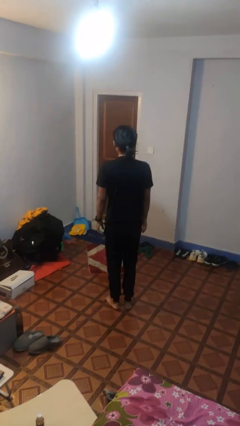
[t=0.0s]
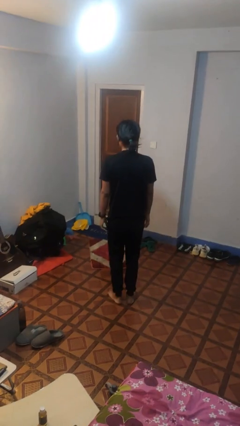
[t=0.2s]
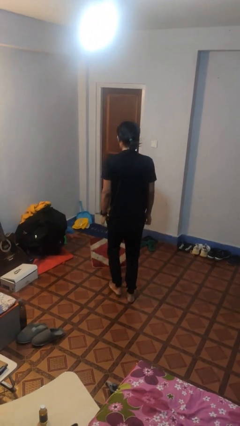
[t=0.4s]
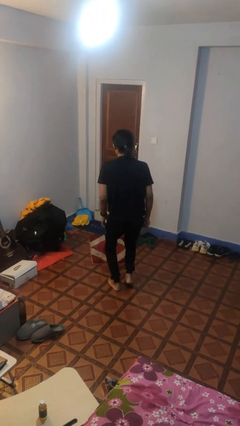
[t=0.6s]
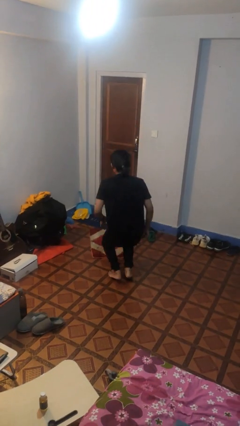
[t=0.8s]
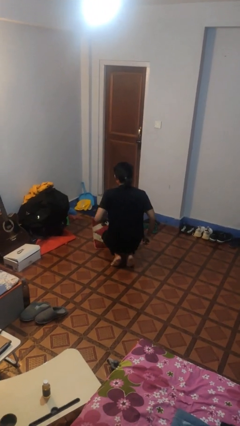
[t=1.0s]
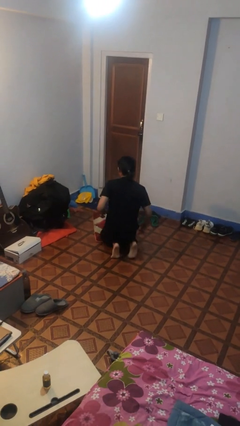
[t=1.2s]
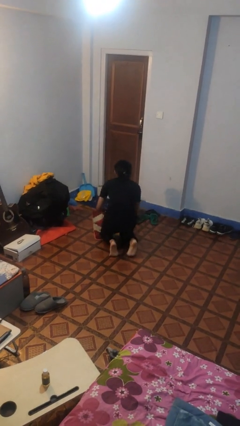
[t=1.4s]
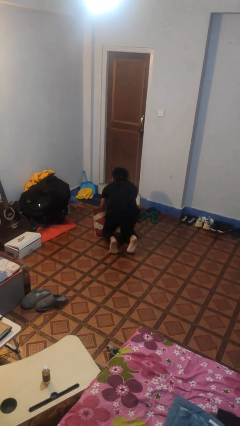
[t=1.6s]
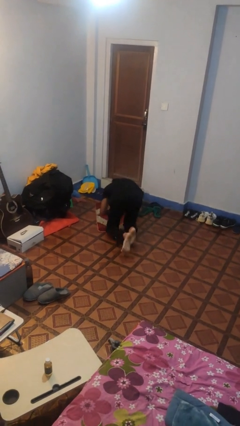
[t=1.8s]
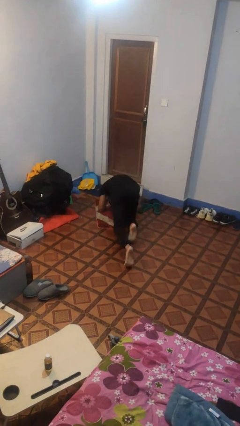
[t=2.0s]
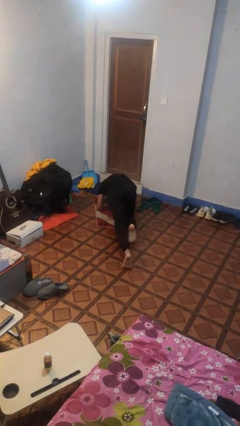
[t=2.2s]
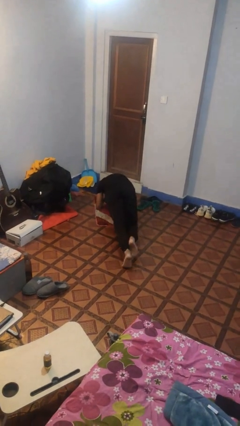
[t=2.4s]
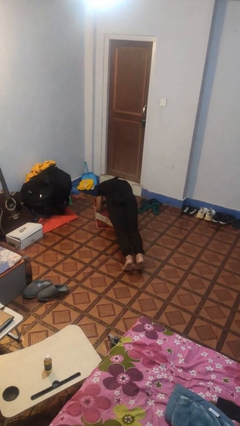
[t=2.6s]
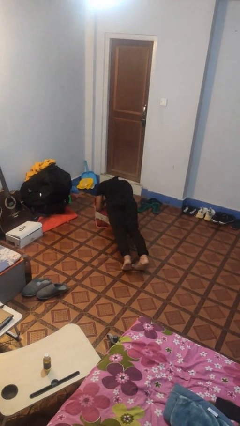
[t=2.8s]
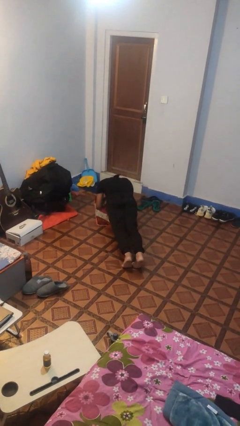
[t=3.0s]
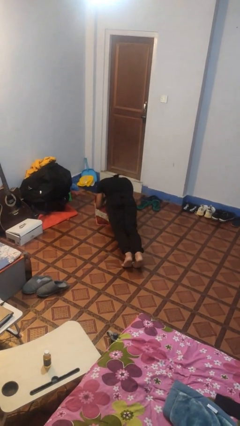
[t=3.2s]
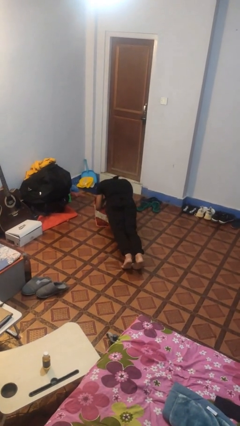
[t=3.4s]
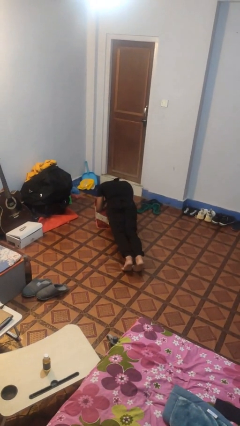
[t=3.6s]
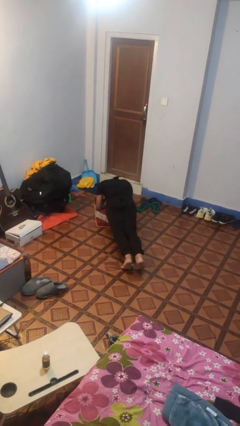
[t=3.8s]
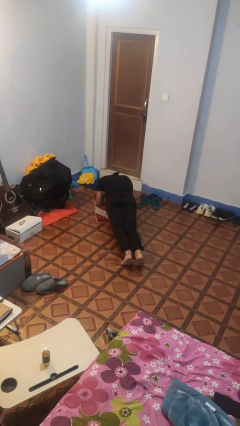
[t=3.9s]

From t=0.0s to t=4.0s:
person exercises with plank

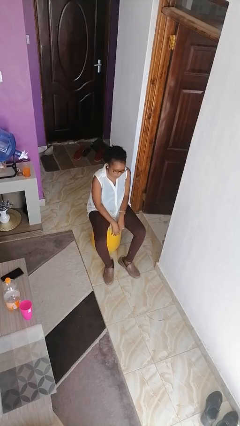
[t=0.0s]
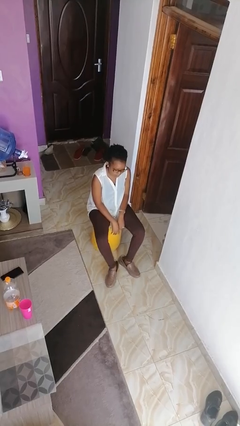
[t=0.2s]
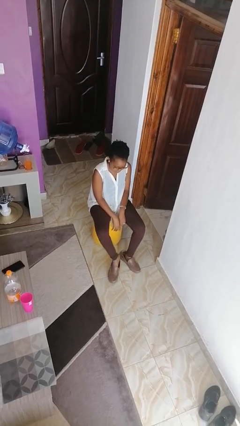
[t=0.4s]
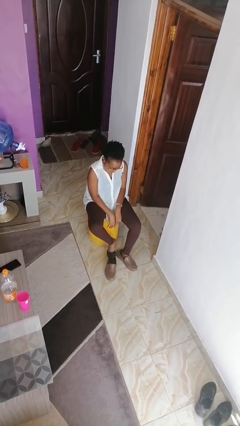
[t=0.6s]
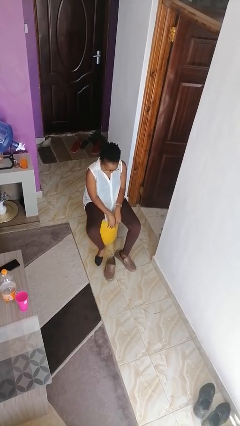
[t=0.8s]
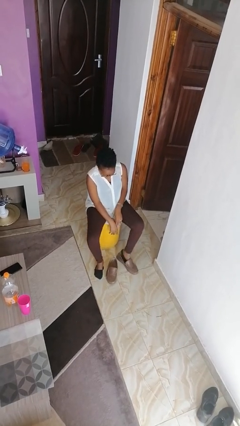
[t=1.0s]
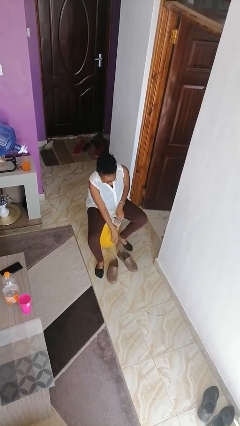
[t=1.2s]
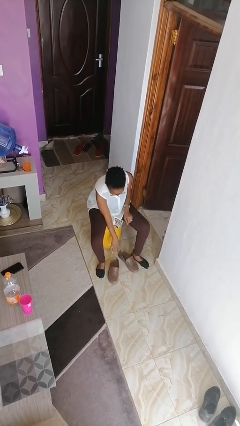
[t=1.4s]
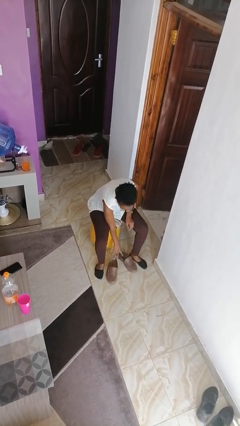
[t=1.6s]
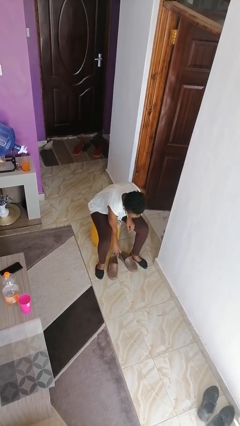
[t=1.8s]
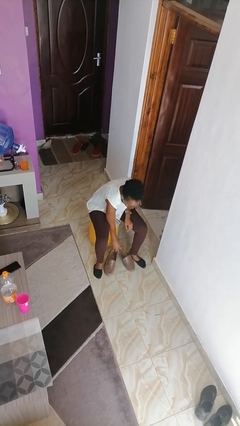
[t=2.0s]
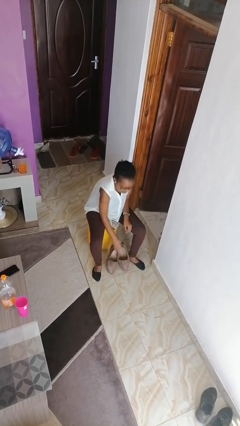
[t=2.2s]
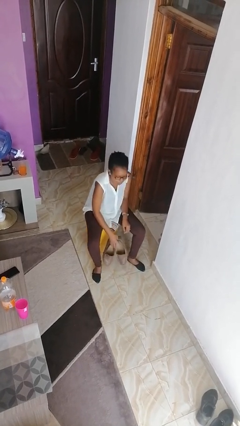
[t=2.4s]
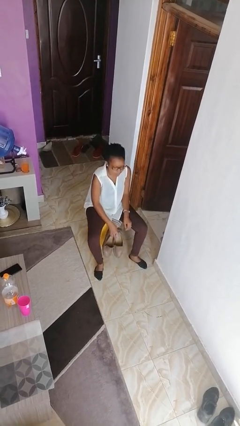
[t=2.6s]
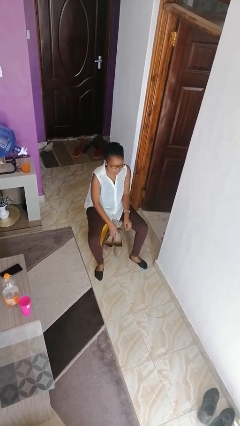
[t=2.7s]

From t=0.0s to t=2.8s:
person takes off shoes

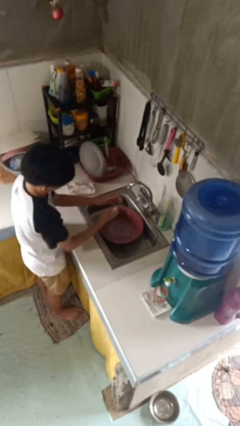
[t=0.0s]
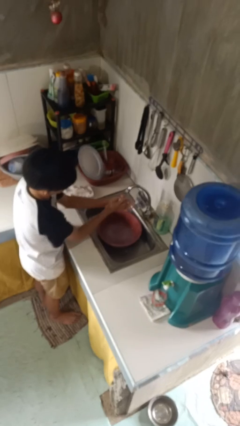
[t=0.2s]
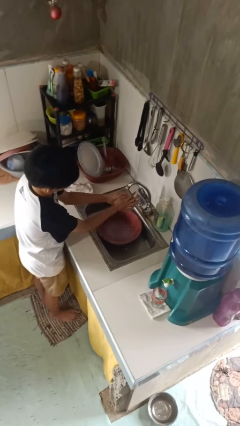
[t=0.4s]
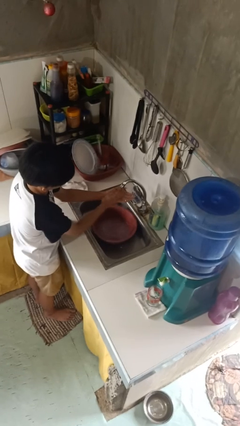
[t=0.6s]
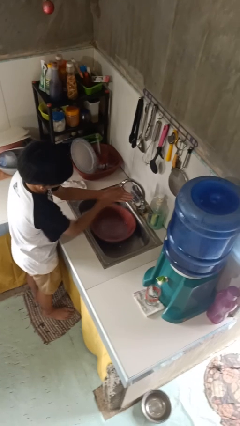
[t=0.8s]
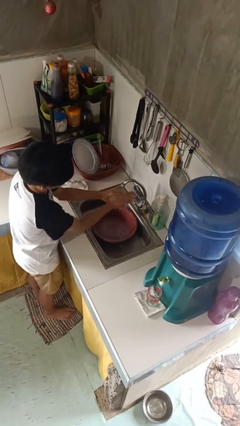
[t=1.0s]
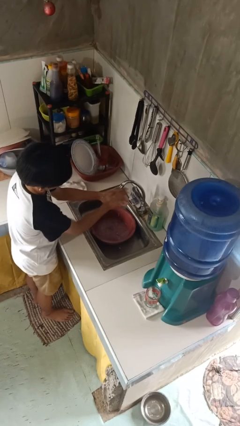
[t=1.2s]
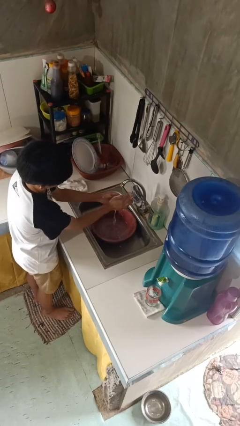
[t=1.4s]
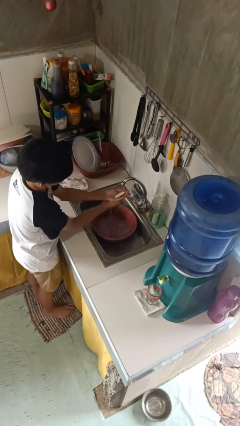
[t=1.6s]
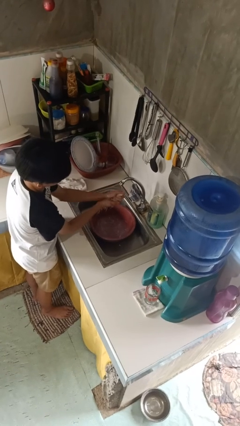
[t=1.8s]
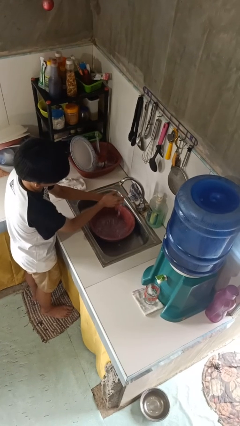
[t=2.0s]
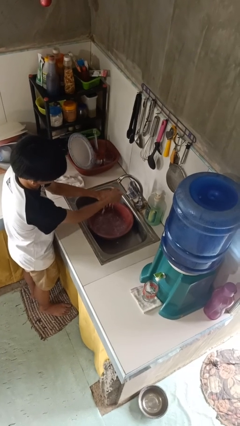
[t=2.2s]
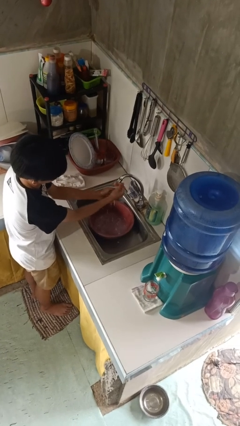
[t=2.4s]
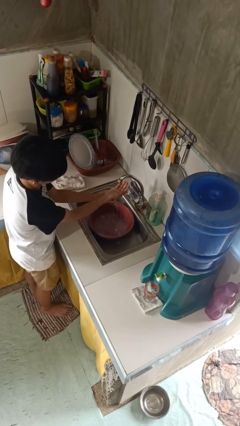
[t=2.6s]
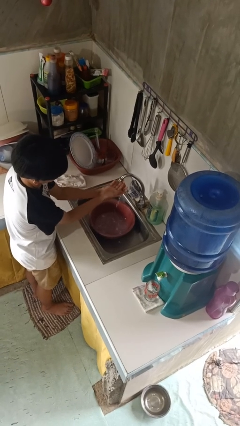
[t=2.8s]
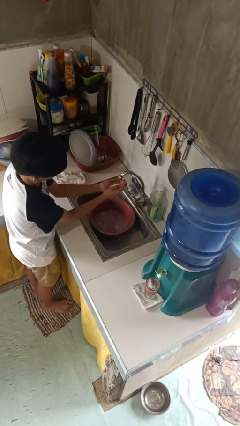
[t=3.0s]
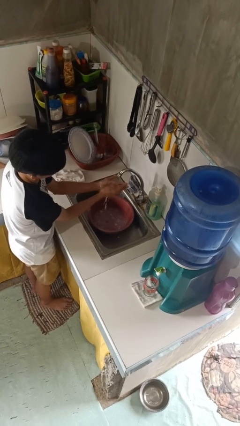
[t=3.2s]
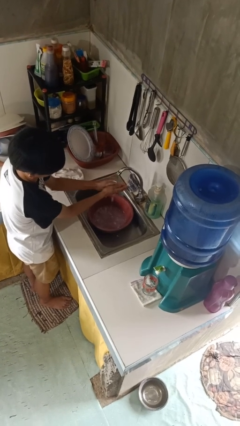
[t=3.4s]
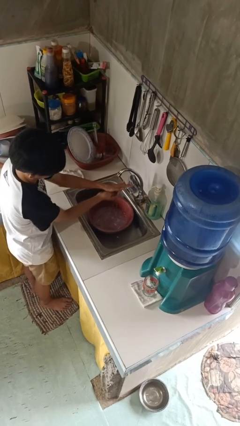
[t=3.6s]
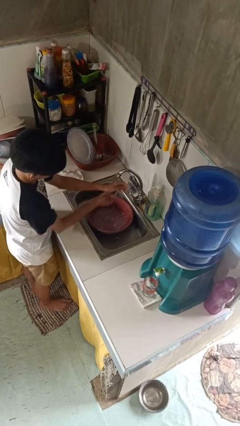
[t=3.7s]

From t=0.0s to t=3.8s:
person washes hands

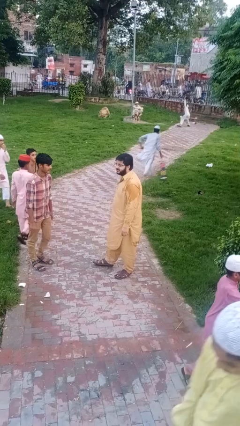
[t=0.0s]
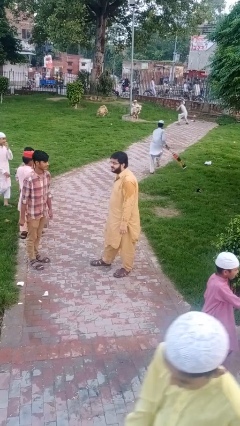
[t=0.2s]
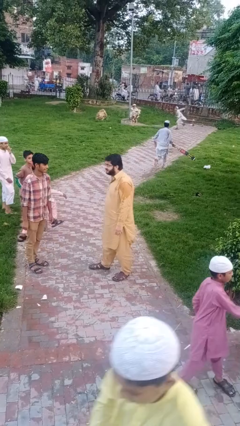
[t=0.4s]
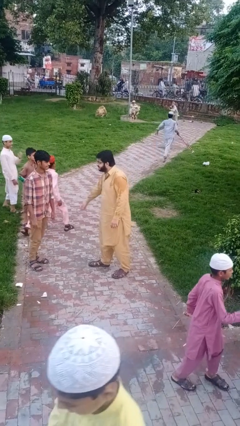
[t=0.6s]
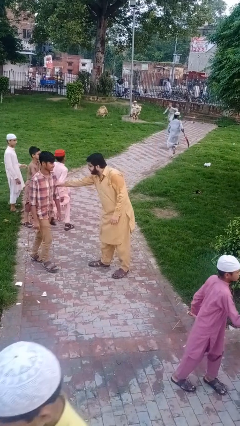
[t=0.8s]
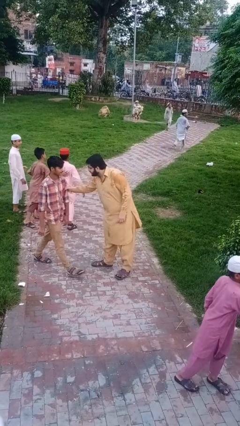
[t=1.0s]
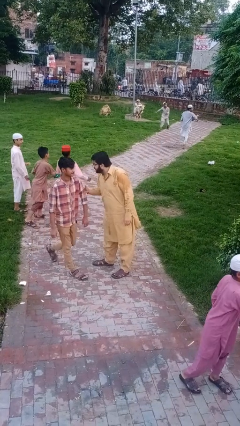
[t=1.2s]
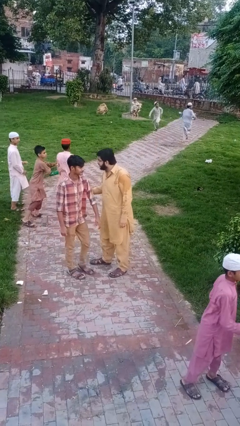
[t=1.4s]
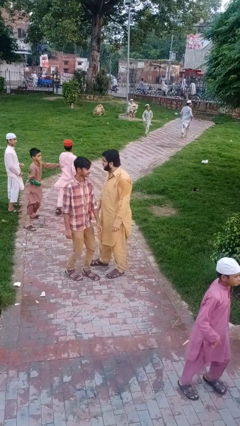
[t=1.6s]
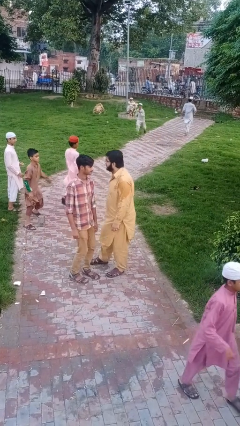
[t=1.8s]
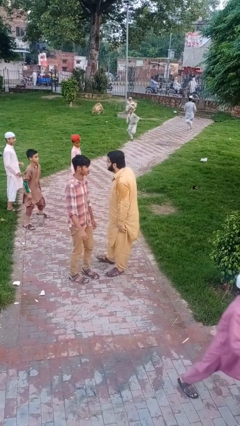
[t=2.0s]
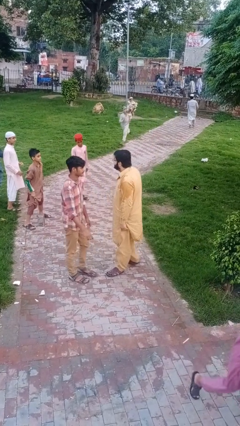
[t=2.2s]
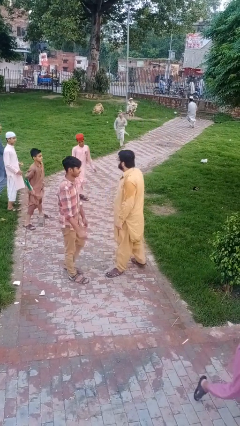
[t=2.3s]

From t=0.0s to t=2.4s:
person grabs person by bicep

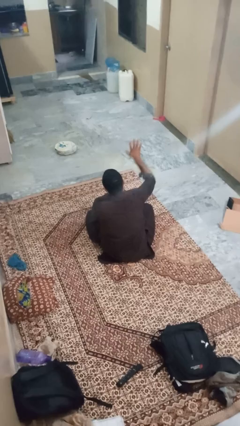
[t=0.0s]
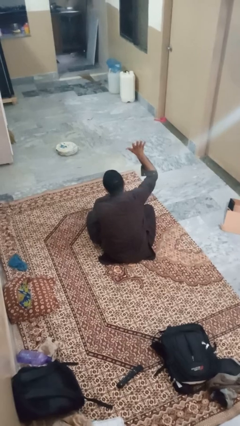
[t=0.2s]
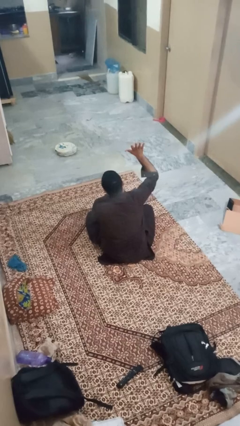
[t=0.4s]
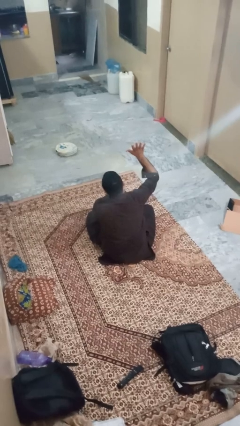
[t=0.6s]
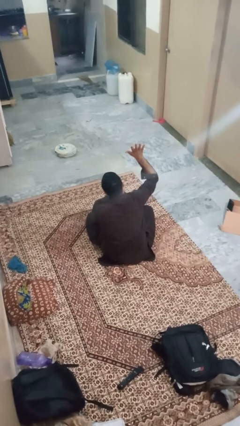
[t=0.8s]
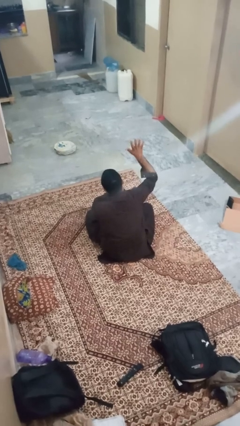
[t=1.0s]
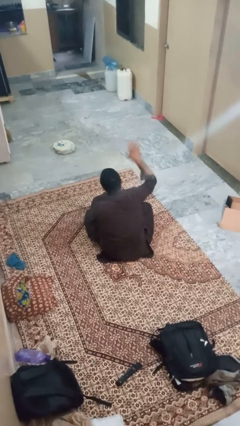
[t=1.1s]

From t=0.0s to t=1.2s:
person gestures number five

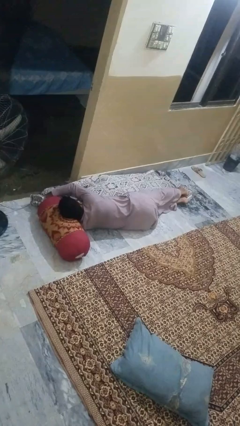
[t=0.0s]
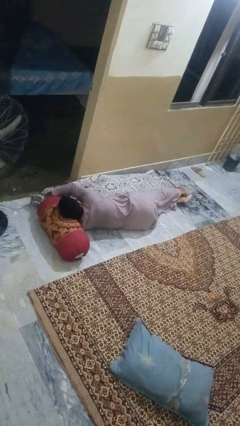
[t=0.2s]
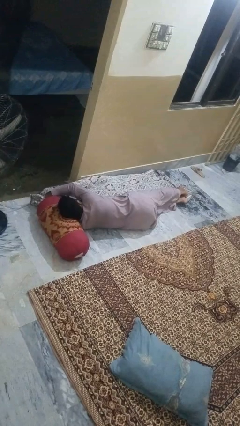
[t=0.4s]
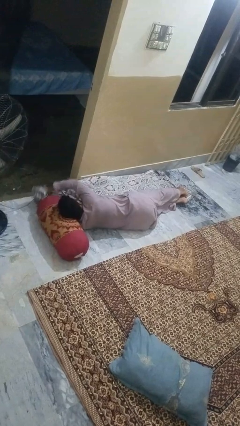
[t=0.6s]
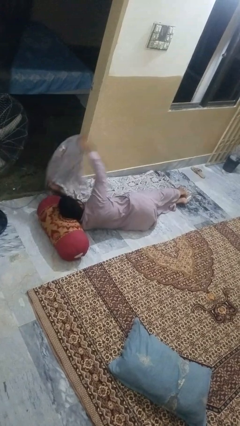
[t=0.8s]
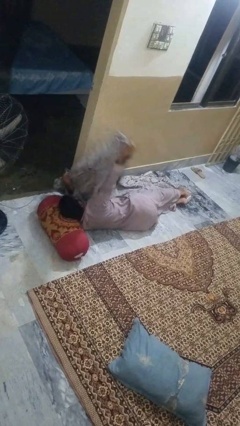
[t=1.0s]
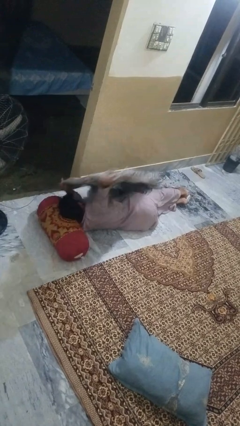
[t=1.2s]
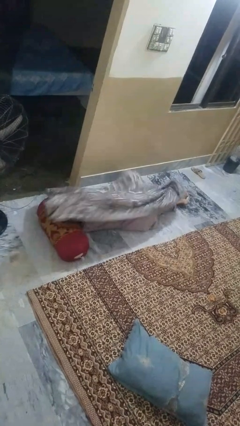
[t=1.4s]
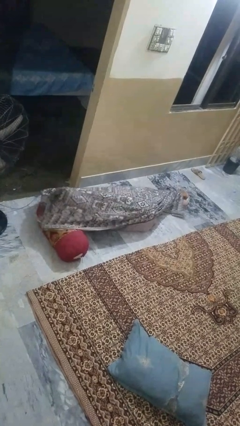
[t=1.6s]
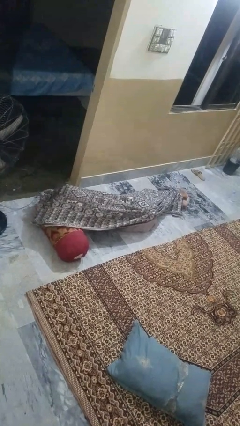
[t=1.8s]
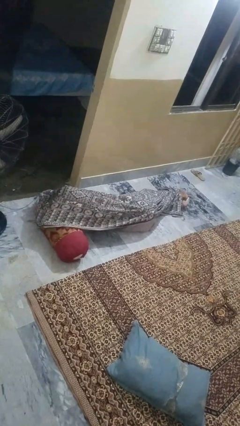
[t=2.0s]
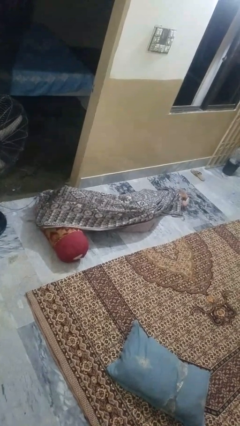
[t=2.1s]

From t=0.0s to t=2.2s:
person covers with blanket

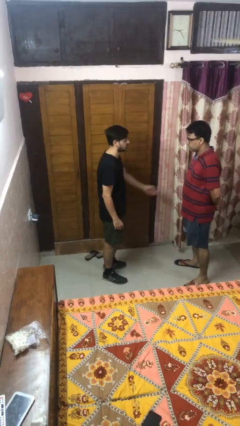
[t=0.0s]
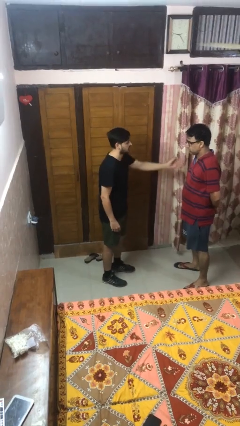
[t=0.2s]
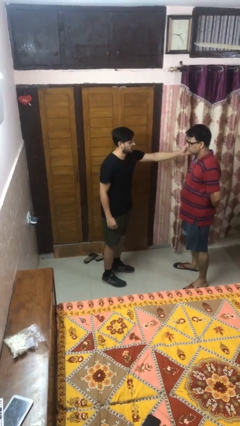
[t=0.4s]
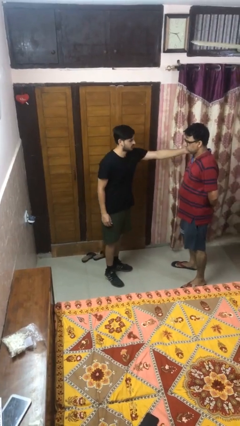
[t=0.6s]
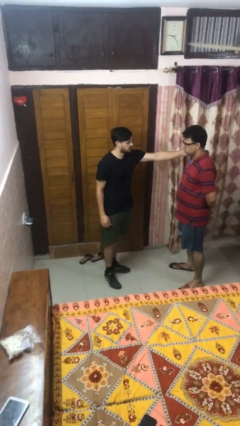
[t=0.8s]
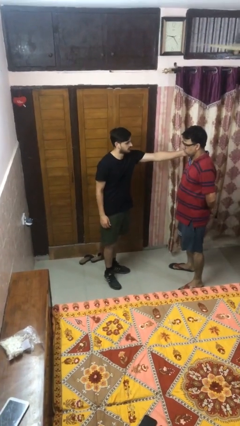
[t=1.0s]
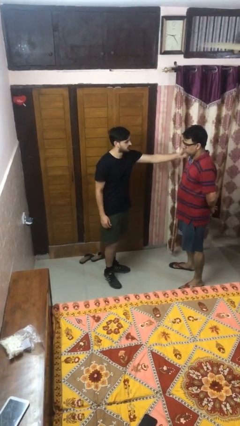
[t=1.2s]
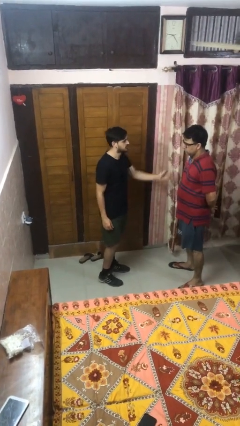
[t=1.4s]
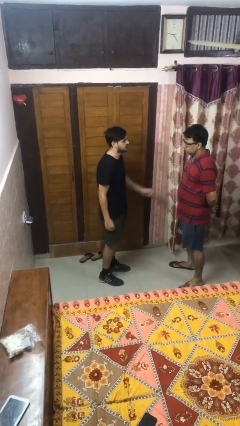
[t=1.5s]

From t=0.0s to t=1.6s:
person touches face of person
